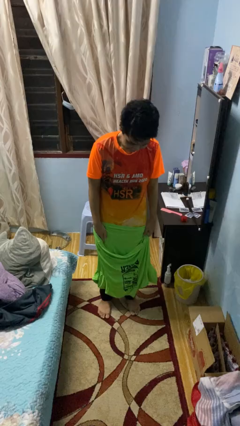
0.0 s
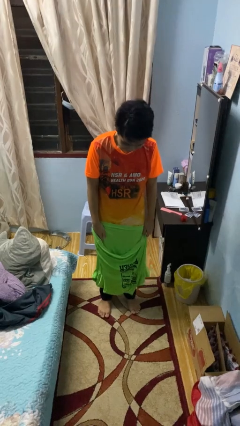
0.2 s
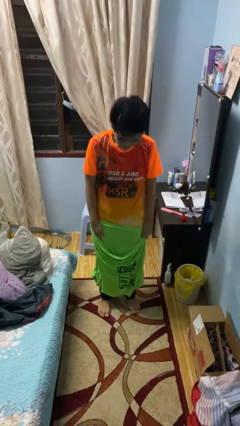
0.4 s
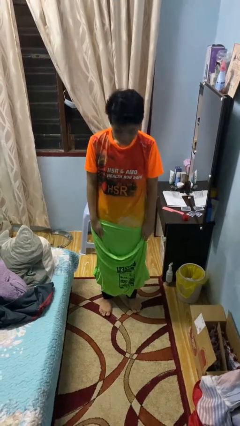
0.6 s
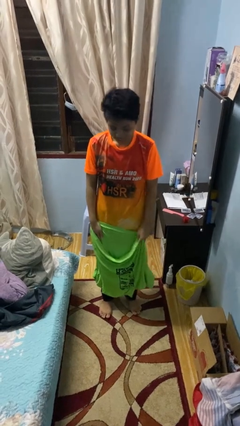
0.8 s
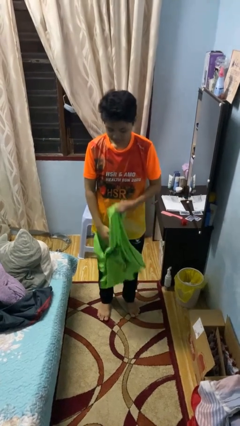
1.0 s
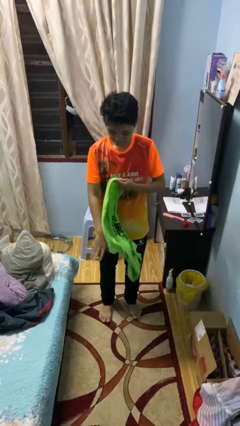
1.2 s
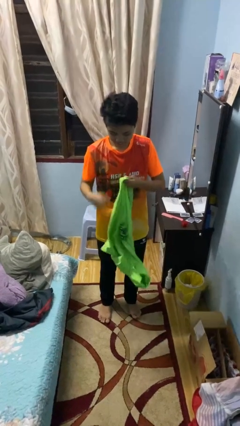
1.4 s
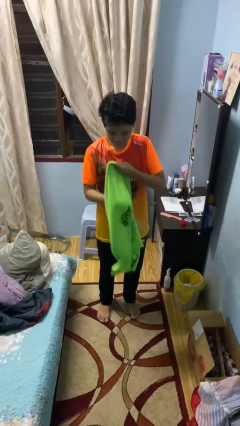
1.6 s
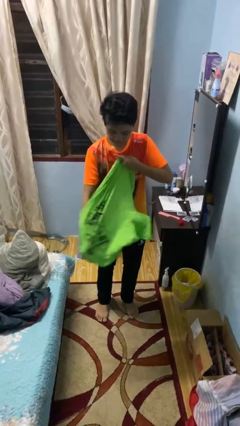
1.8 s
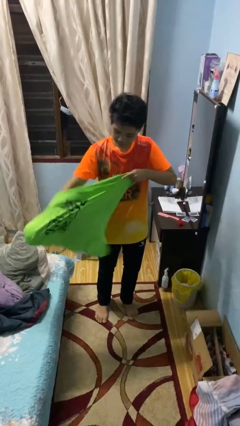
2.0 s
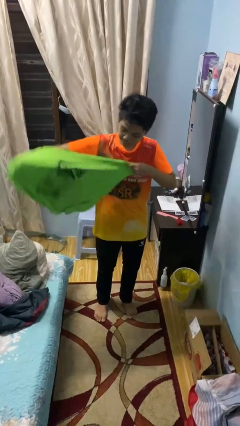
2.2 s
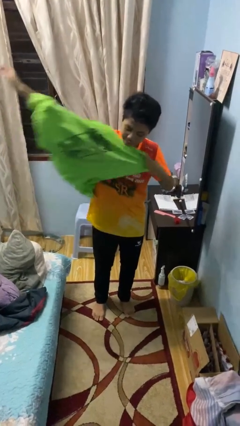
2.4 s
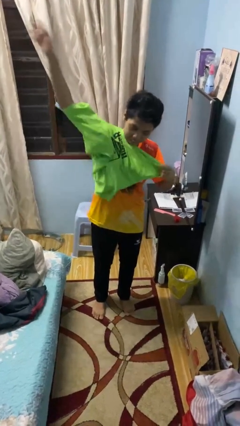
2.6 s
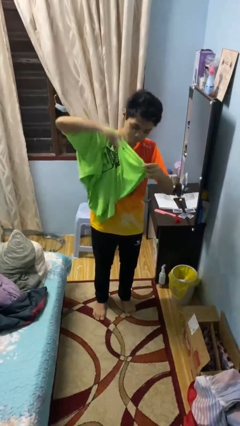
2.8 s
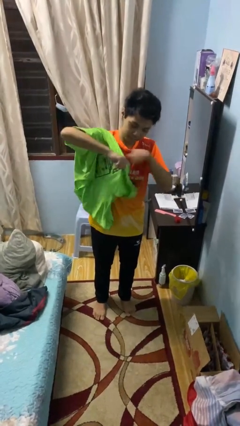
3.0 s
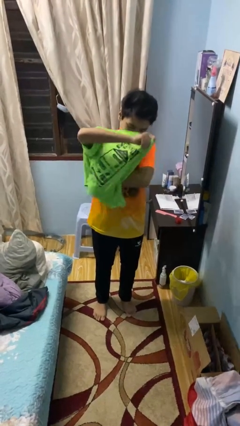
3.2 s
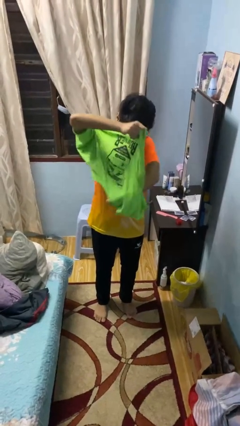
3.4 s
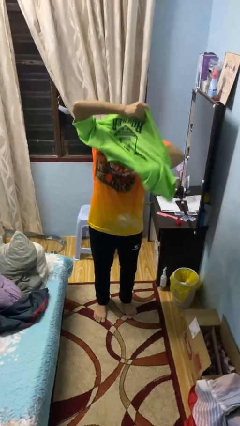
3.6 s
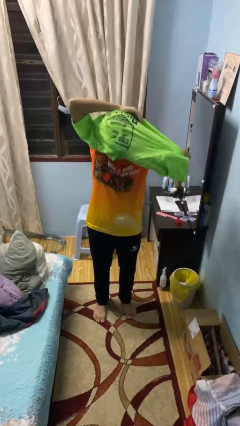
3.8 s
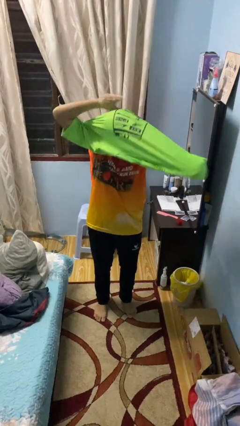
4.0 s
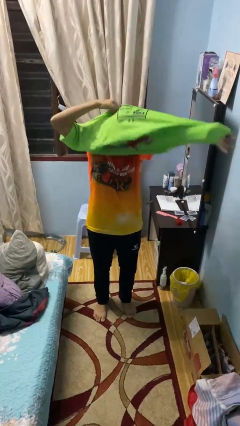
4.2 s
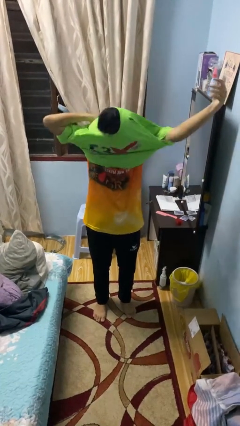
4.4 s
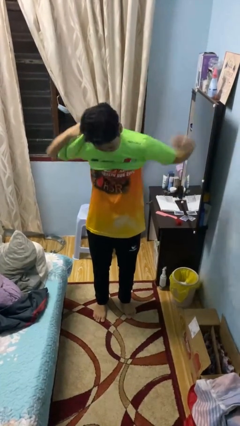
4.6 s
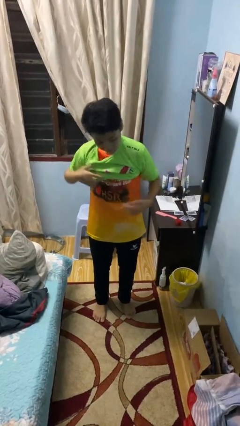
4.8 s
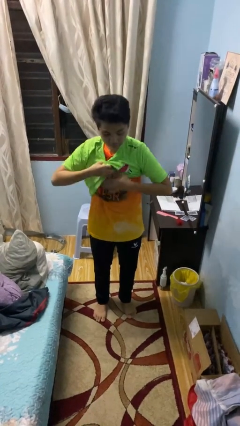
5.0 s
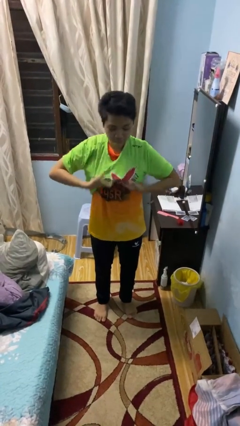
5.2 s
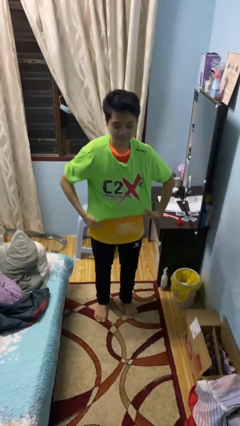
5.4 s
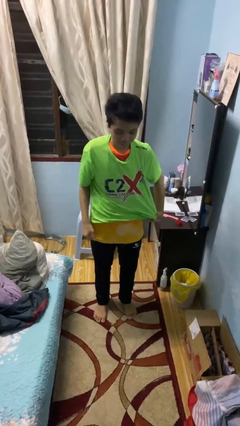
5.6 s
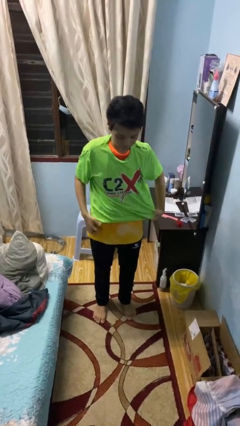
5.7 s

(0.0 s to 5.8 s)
person puts on shirt

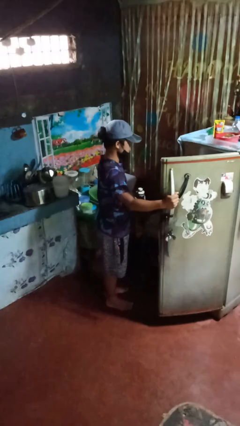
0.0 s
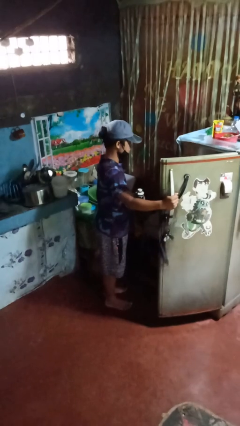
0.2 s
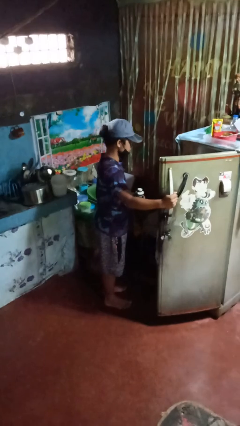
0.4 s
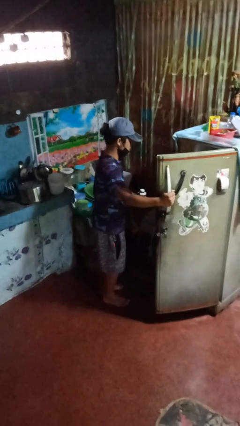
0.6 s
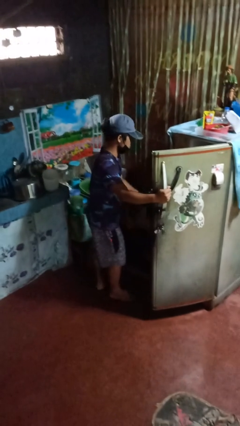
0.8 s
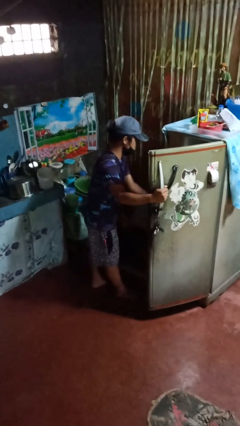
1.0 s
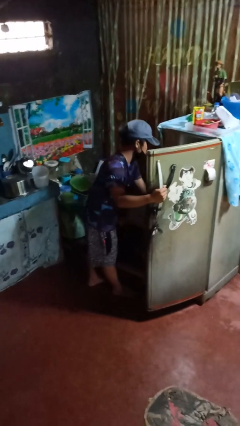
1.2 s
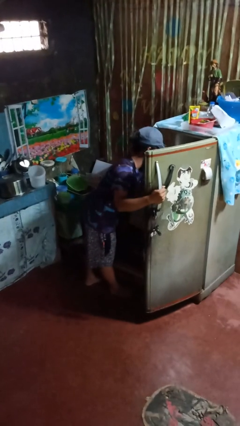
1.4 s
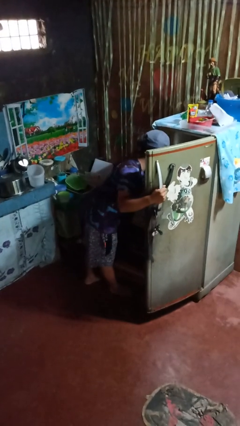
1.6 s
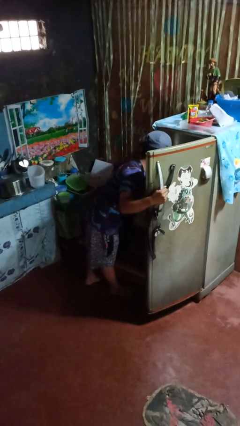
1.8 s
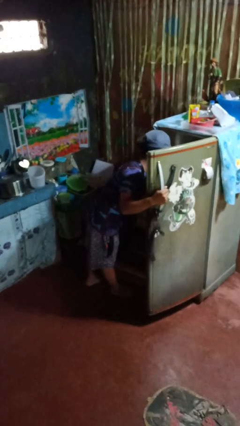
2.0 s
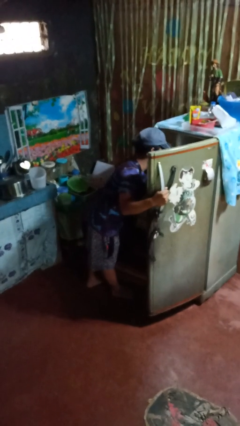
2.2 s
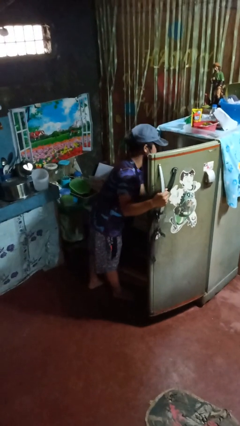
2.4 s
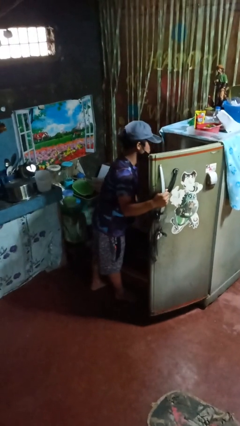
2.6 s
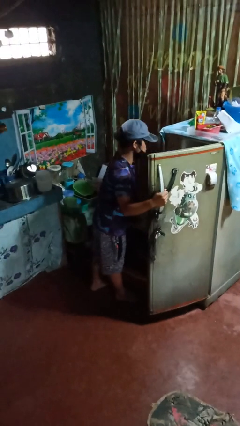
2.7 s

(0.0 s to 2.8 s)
person puts object into refrigerator

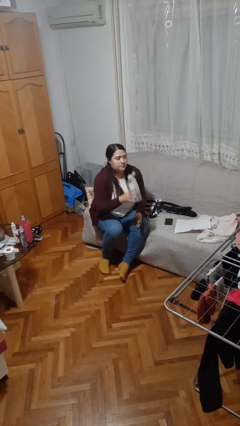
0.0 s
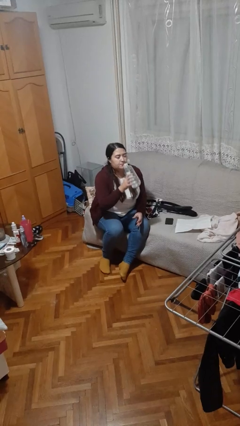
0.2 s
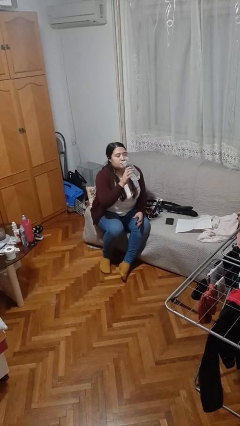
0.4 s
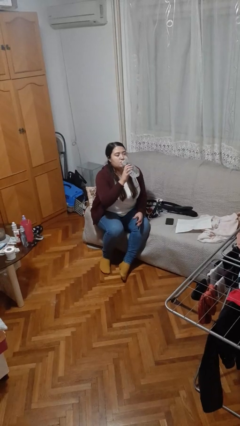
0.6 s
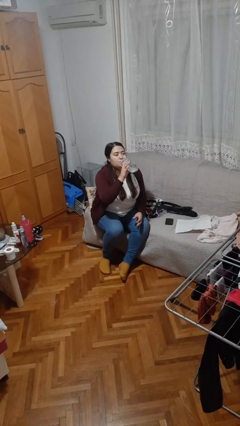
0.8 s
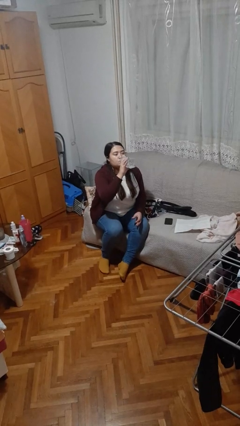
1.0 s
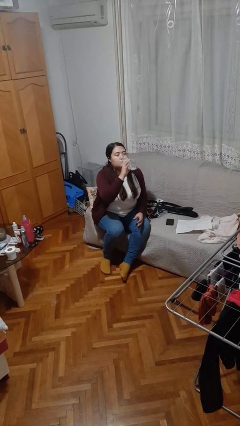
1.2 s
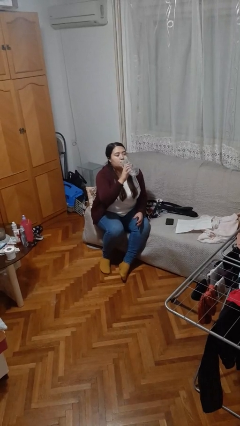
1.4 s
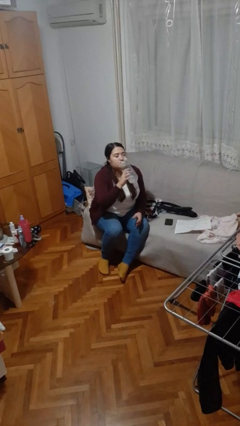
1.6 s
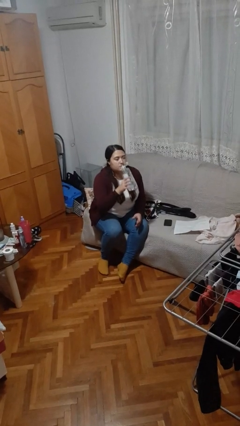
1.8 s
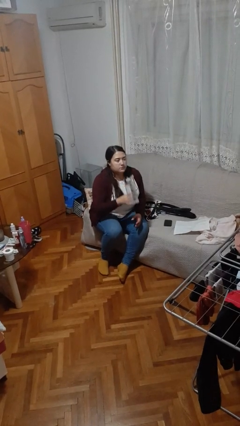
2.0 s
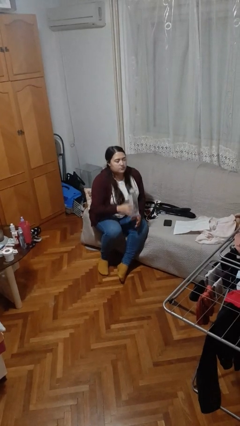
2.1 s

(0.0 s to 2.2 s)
person drinks from bottle

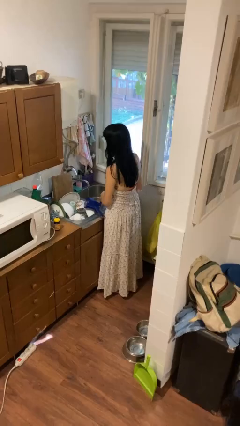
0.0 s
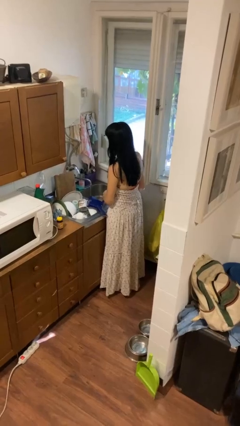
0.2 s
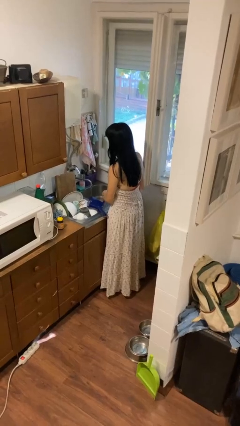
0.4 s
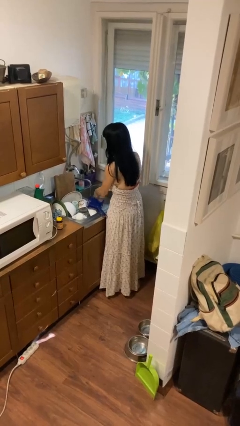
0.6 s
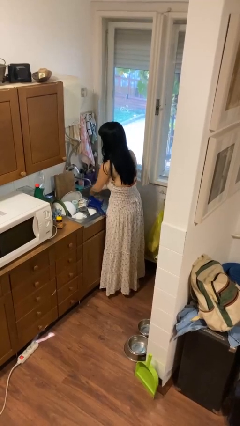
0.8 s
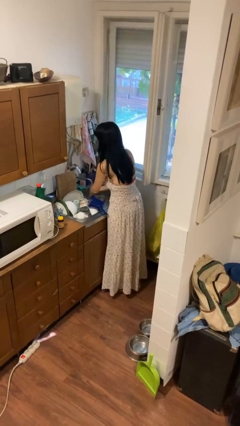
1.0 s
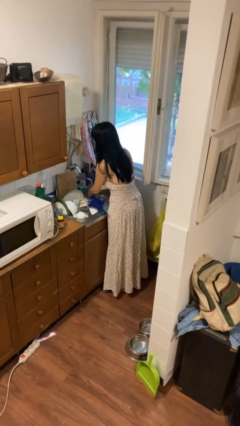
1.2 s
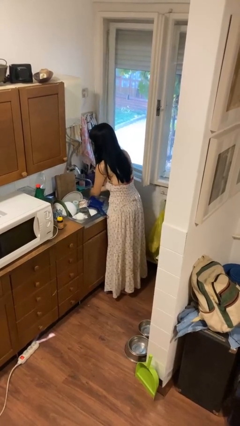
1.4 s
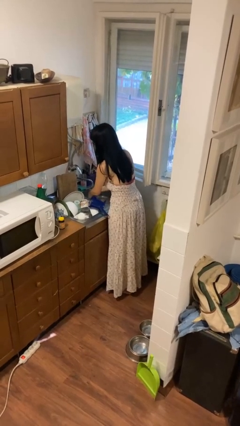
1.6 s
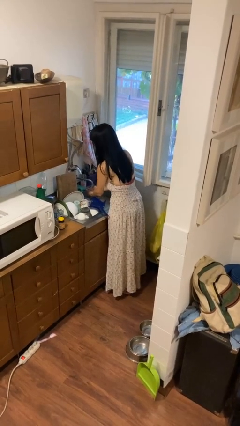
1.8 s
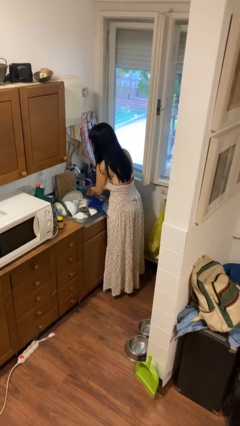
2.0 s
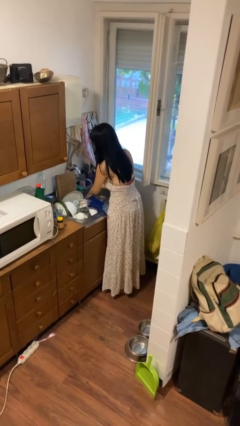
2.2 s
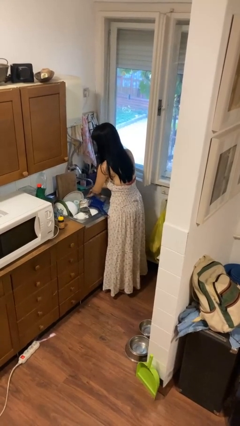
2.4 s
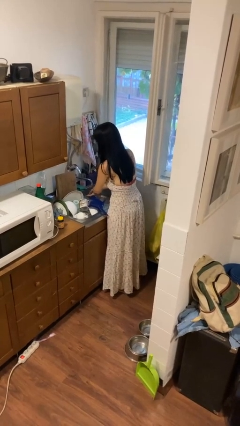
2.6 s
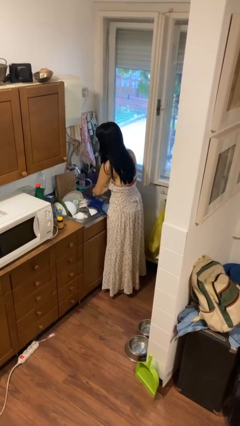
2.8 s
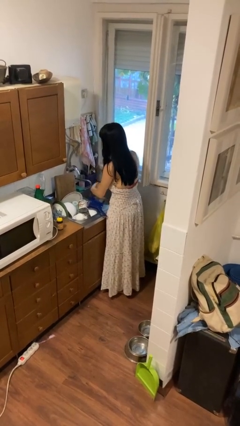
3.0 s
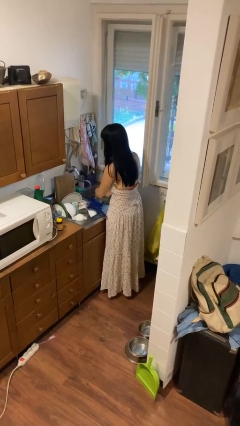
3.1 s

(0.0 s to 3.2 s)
person washes hands

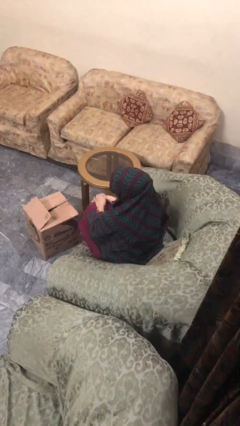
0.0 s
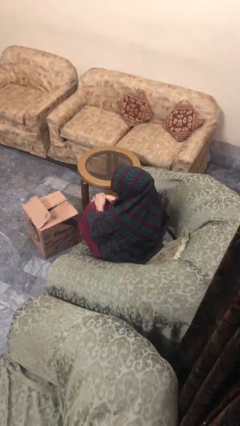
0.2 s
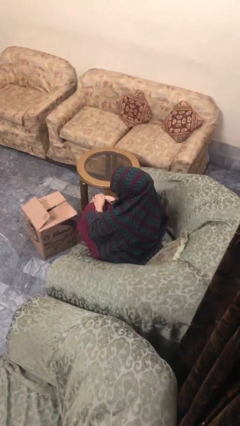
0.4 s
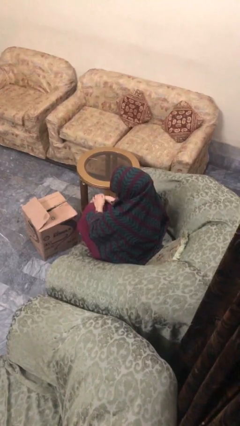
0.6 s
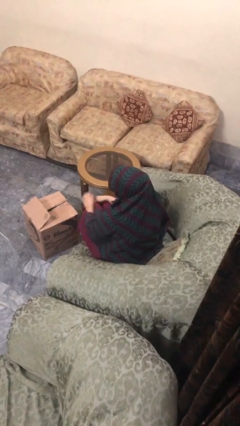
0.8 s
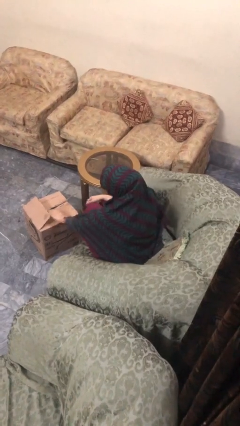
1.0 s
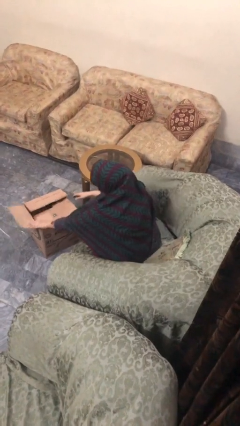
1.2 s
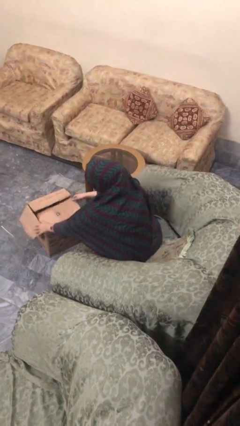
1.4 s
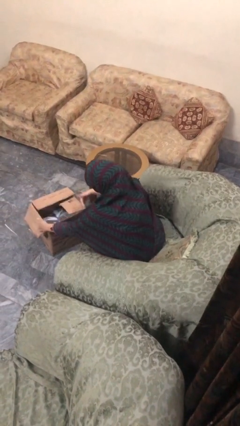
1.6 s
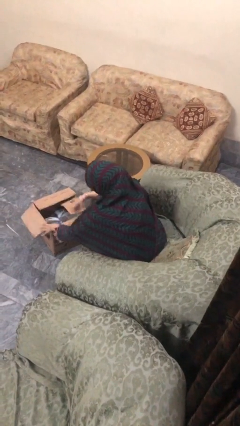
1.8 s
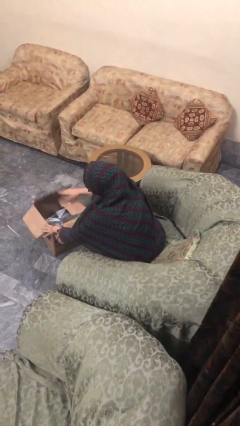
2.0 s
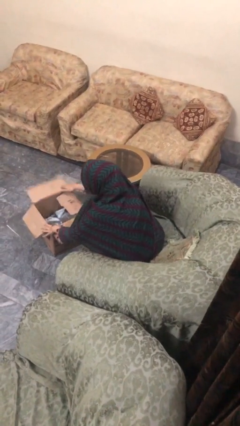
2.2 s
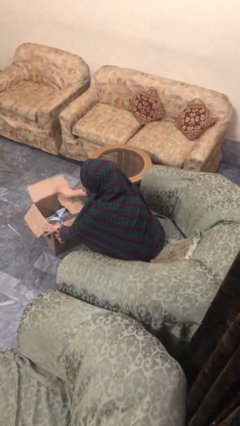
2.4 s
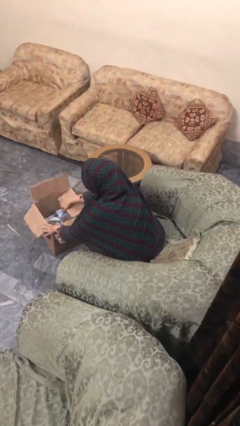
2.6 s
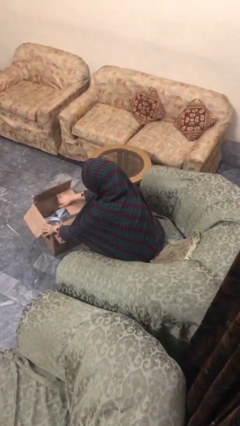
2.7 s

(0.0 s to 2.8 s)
person opens box

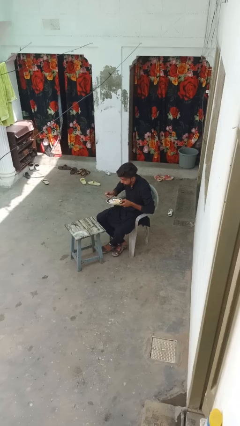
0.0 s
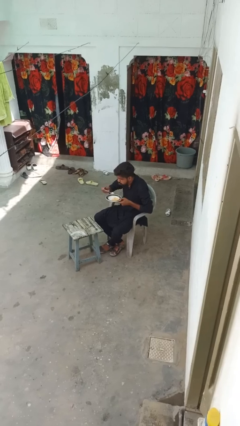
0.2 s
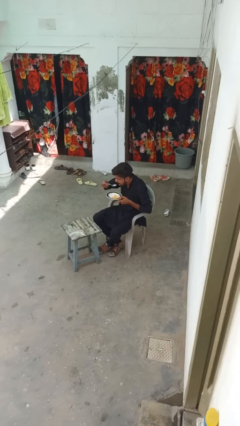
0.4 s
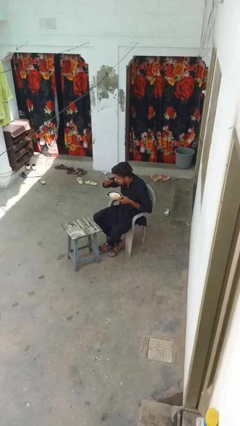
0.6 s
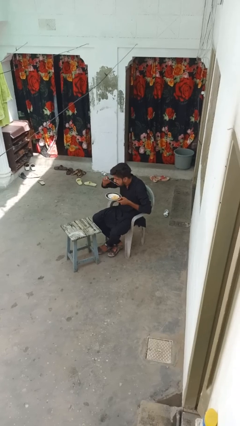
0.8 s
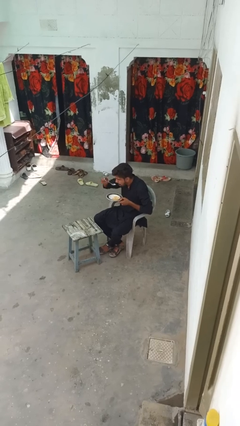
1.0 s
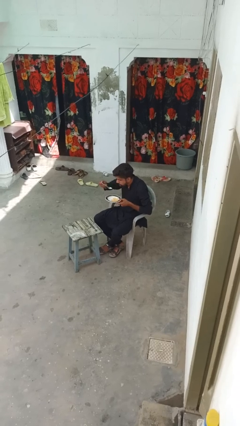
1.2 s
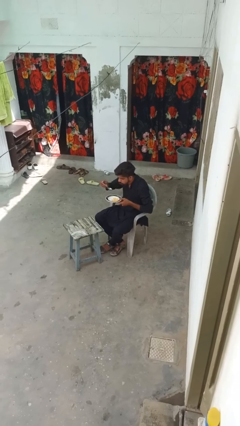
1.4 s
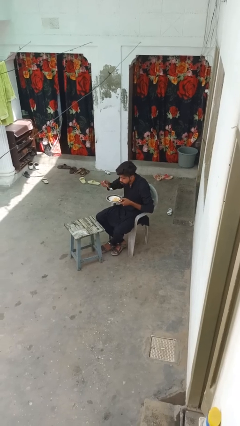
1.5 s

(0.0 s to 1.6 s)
person eats with utensil
